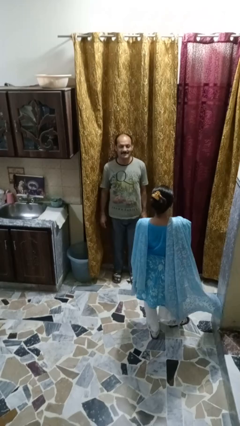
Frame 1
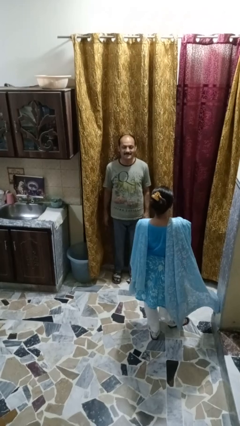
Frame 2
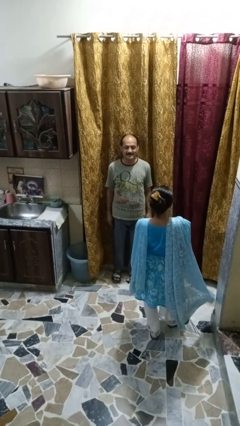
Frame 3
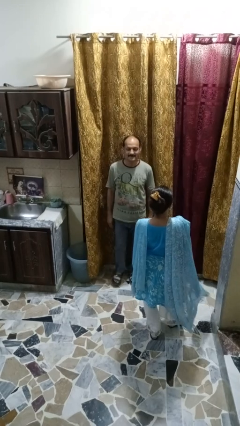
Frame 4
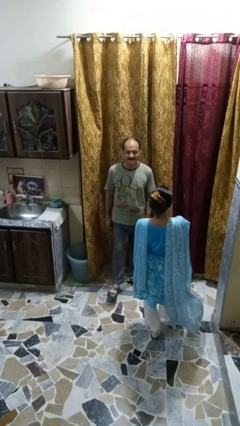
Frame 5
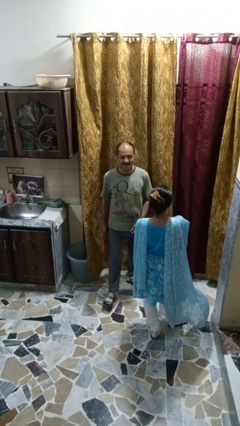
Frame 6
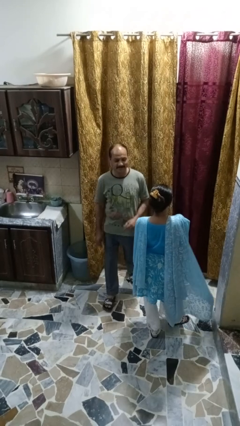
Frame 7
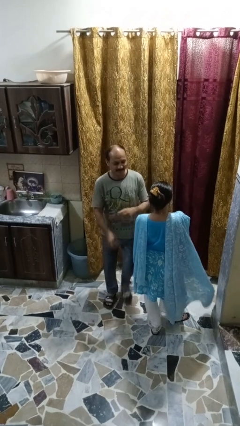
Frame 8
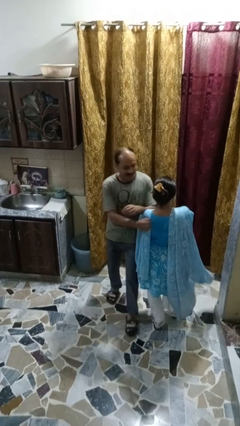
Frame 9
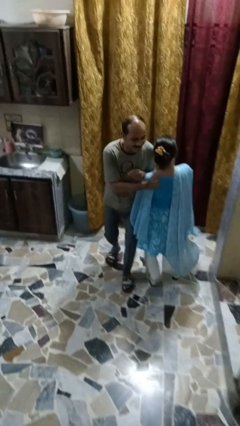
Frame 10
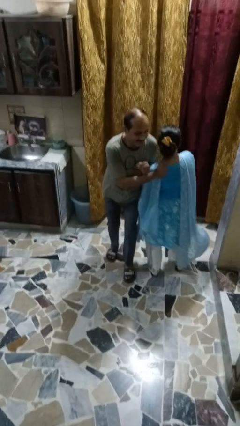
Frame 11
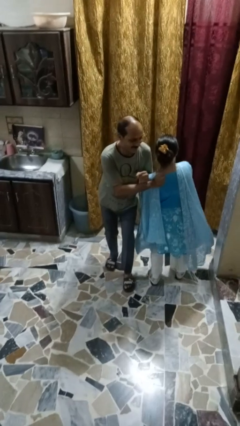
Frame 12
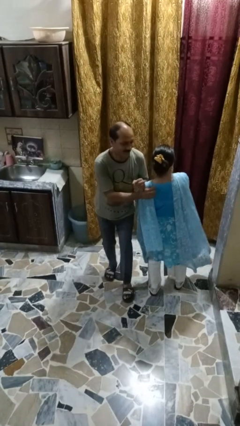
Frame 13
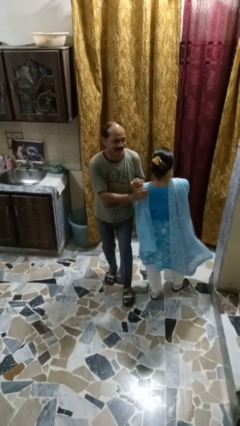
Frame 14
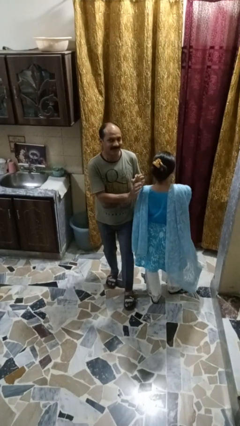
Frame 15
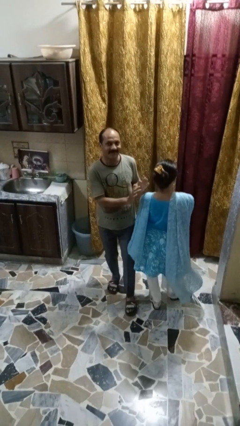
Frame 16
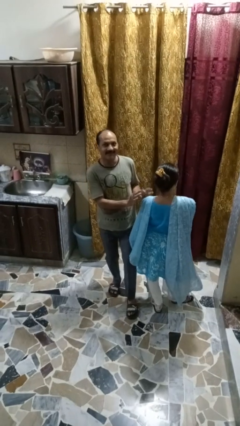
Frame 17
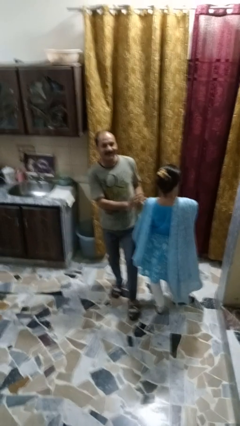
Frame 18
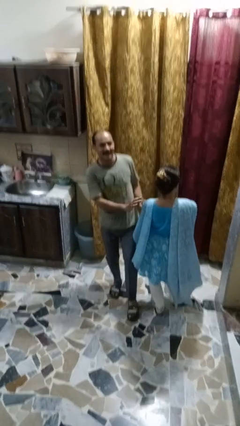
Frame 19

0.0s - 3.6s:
person bumps into person

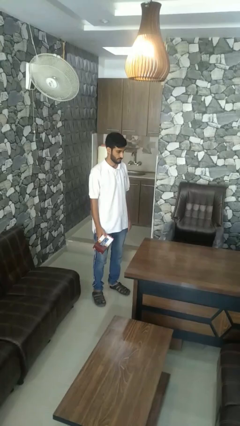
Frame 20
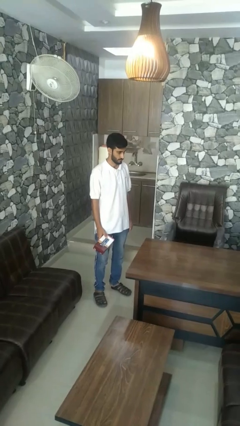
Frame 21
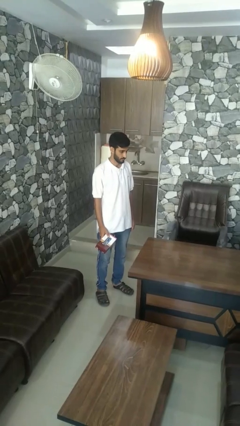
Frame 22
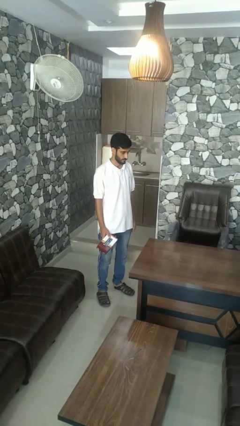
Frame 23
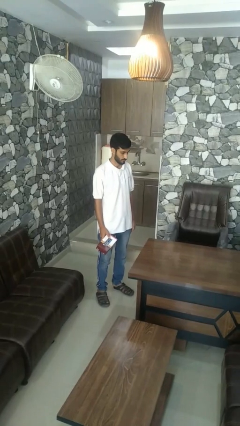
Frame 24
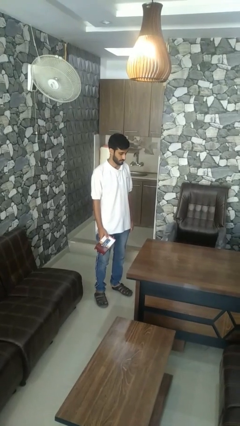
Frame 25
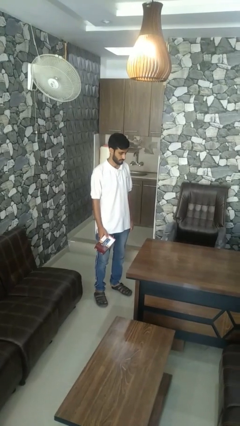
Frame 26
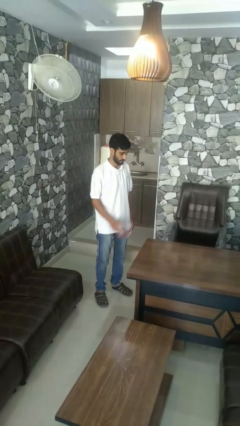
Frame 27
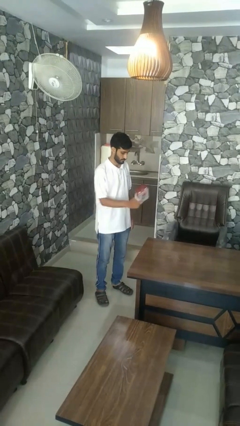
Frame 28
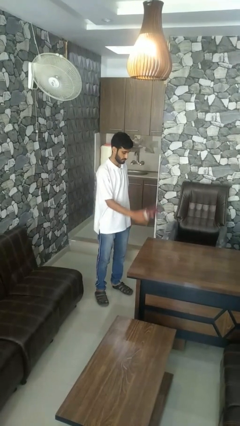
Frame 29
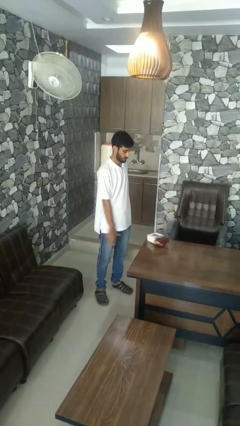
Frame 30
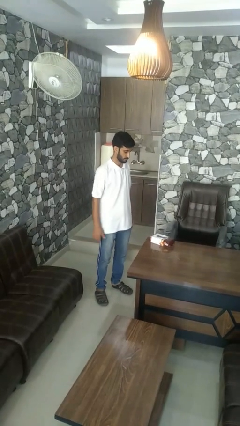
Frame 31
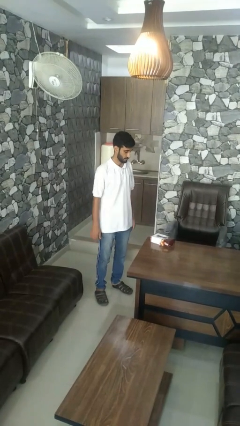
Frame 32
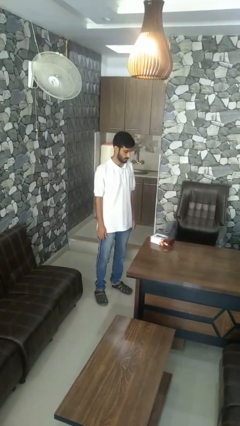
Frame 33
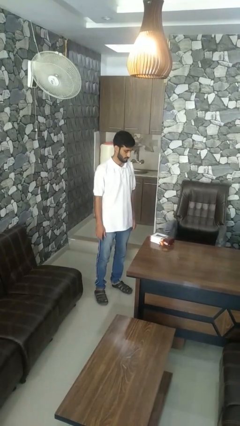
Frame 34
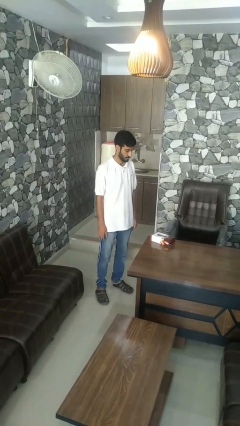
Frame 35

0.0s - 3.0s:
person throws object on table

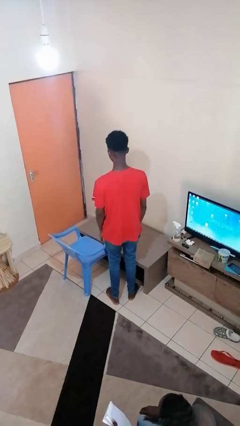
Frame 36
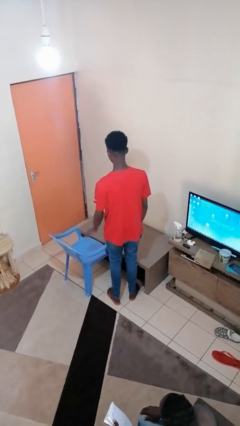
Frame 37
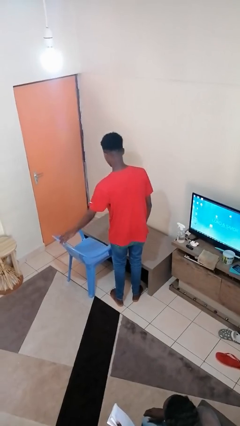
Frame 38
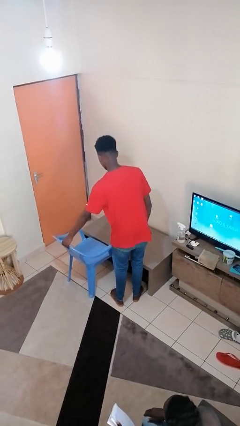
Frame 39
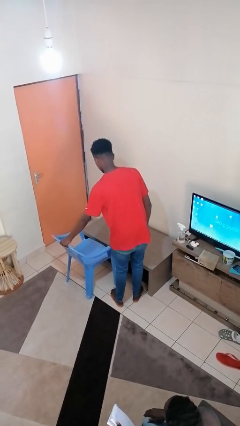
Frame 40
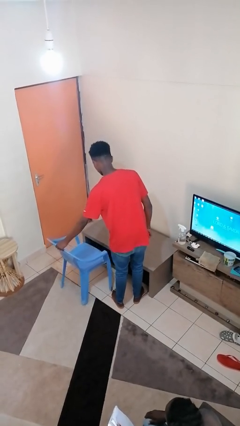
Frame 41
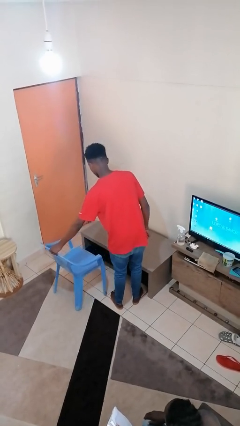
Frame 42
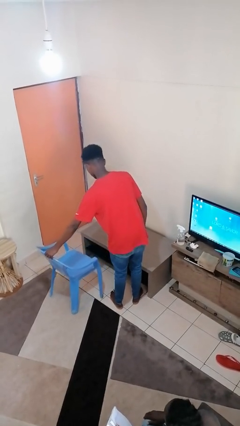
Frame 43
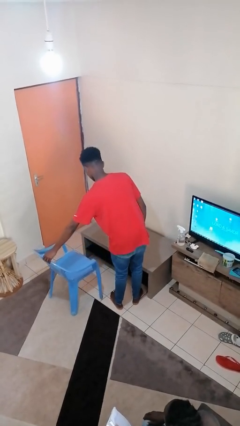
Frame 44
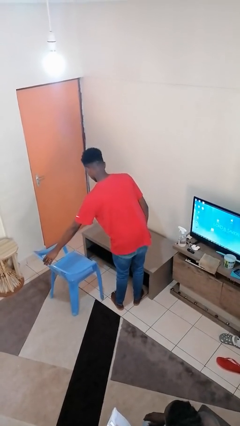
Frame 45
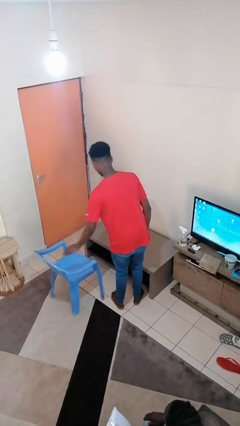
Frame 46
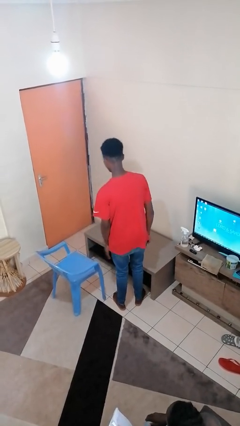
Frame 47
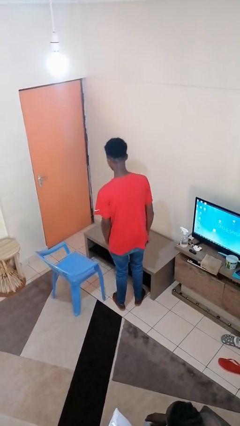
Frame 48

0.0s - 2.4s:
person pulls out chair

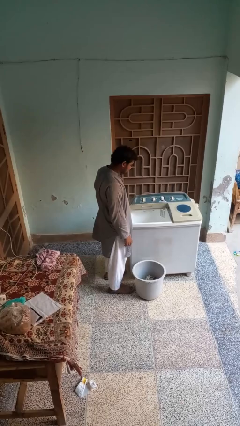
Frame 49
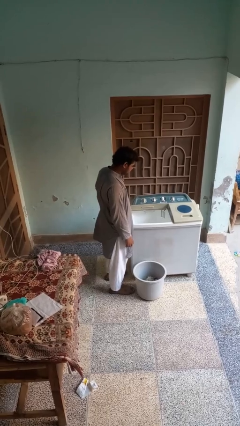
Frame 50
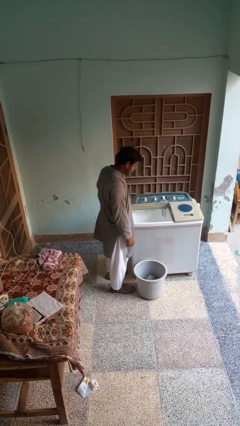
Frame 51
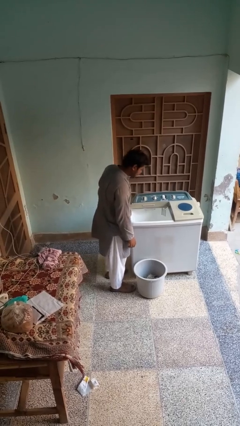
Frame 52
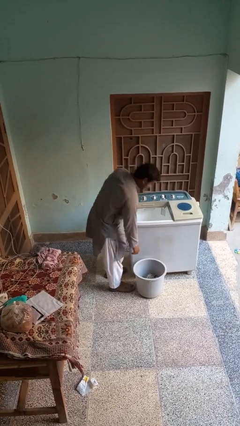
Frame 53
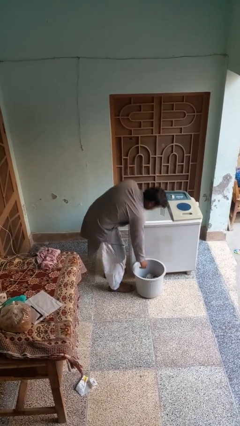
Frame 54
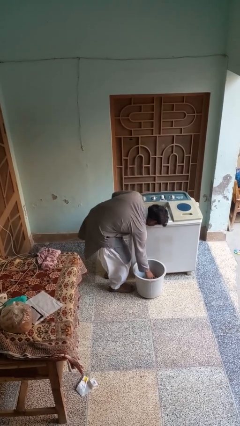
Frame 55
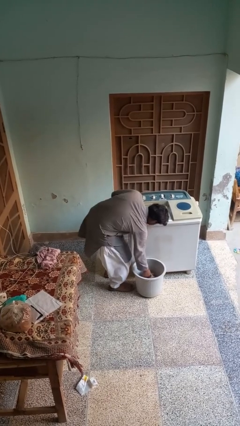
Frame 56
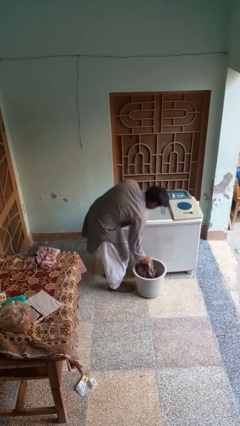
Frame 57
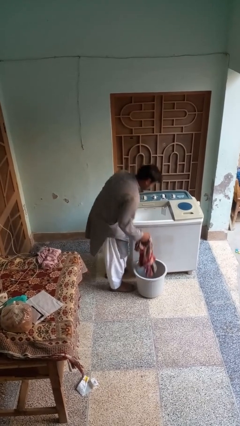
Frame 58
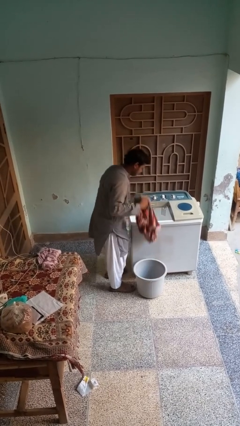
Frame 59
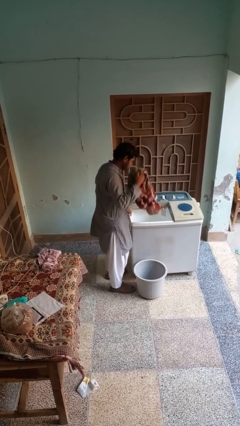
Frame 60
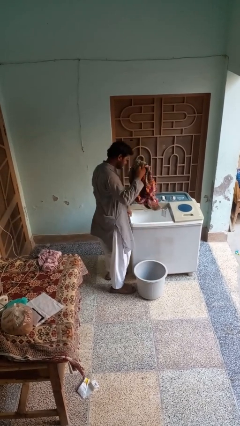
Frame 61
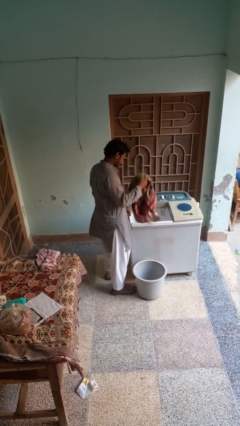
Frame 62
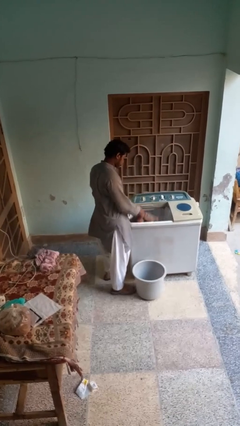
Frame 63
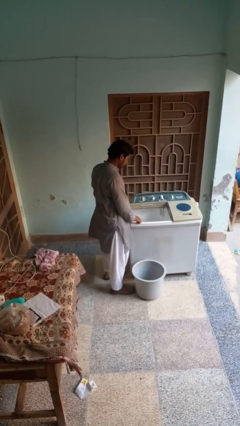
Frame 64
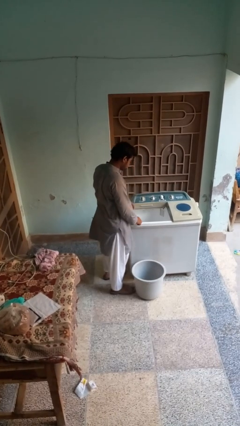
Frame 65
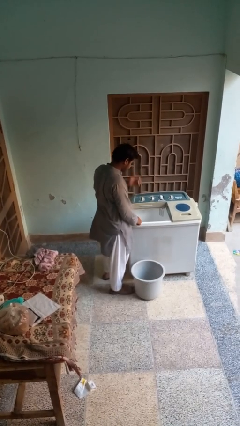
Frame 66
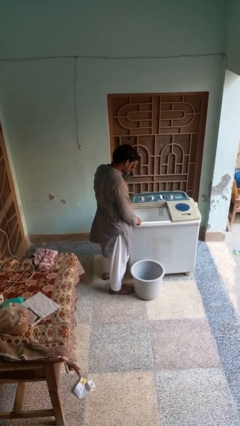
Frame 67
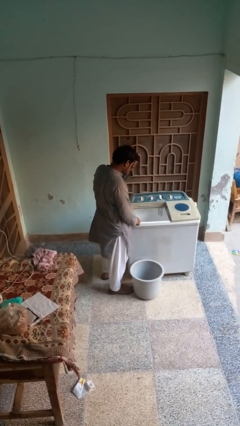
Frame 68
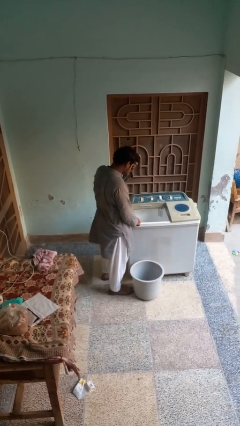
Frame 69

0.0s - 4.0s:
person loads clotheswasher

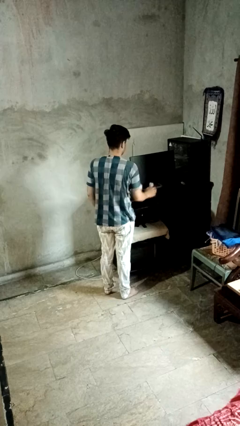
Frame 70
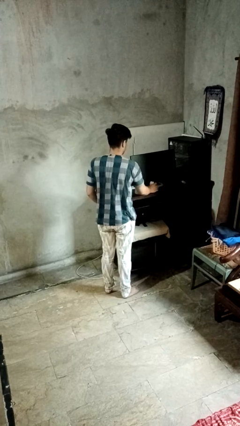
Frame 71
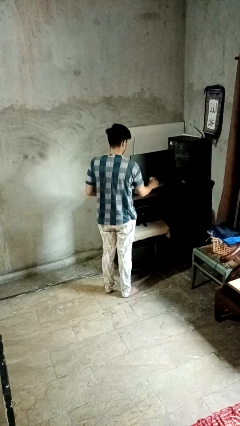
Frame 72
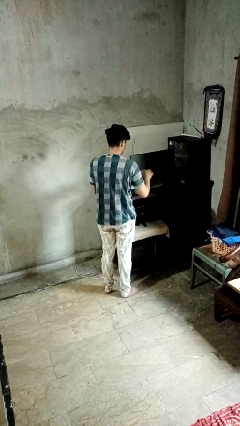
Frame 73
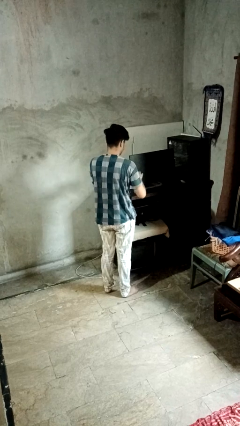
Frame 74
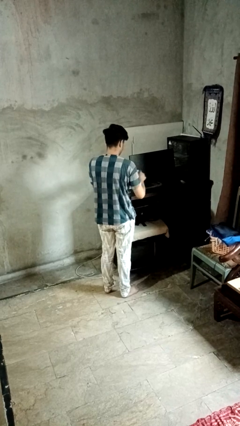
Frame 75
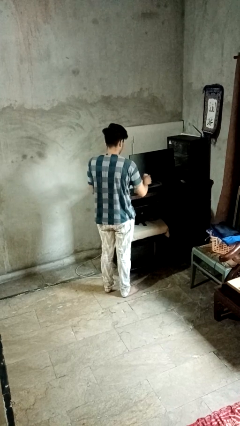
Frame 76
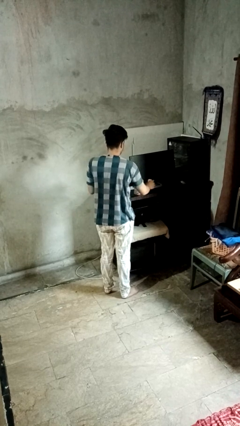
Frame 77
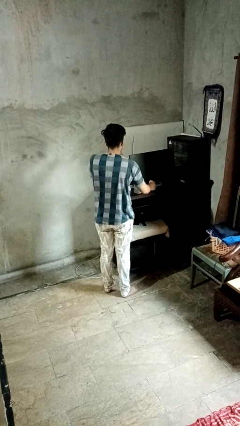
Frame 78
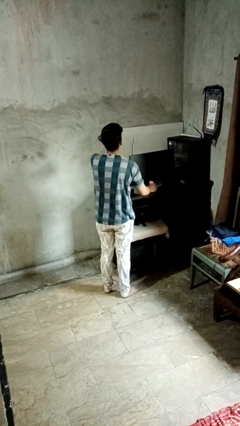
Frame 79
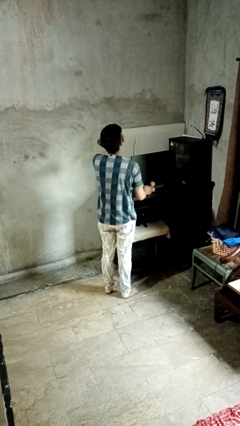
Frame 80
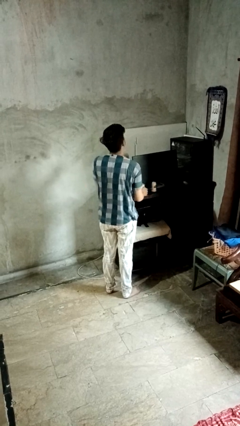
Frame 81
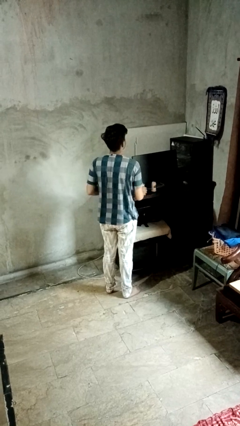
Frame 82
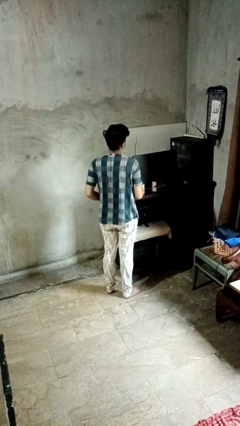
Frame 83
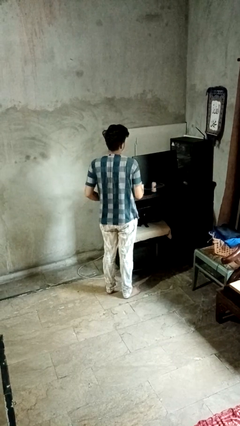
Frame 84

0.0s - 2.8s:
person takes medicine pills

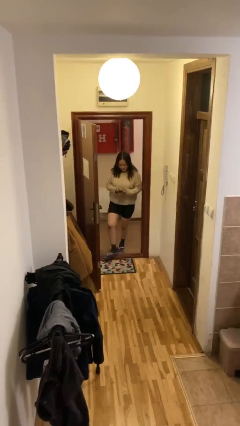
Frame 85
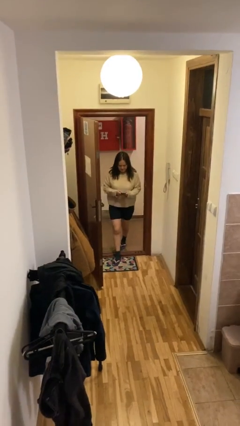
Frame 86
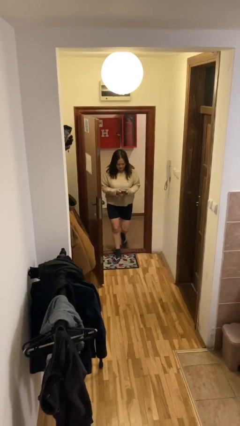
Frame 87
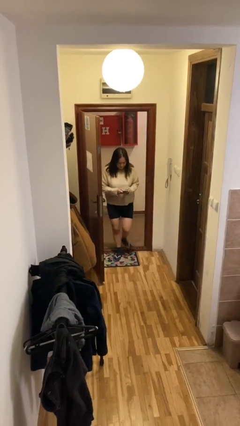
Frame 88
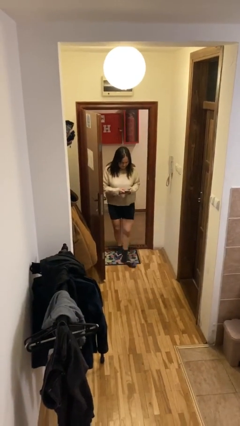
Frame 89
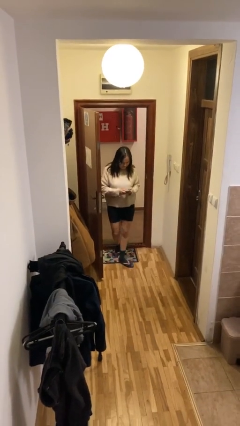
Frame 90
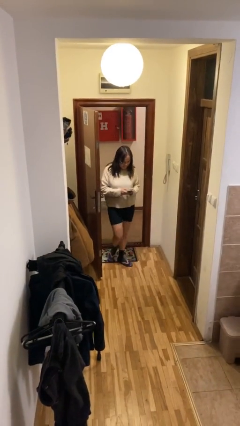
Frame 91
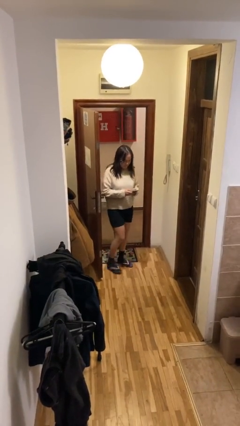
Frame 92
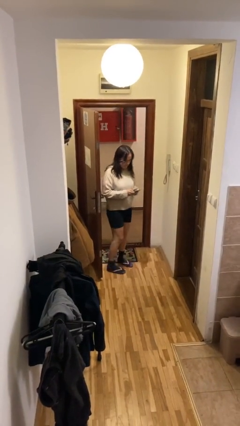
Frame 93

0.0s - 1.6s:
person enters scene through structure
